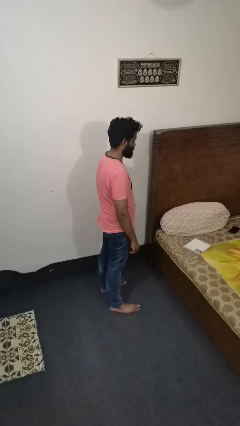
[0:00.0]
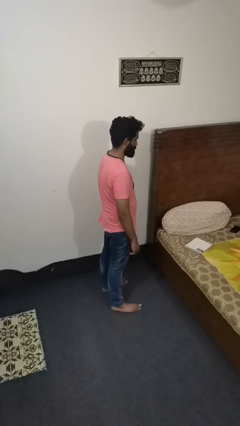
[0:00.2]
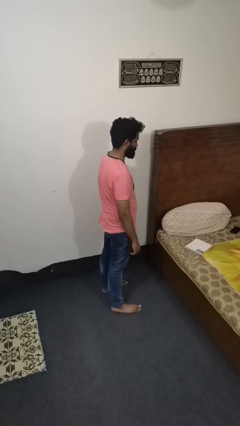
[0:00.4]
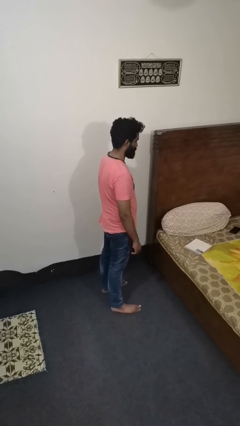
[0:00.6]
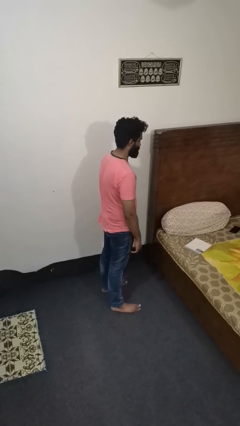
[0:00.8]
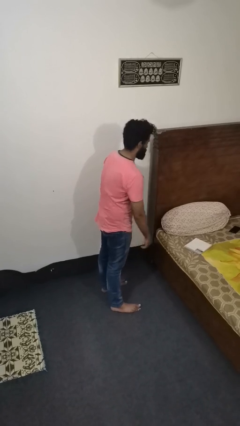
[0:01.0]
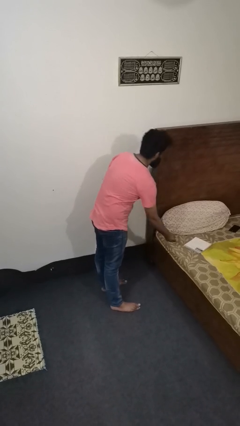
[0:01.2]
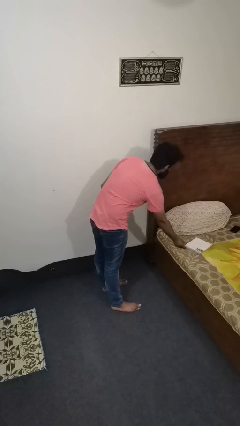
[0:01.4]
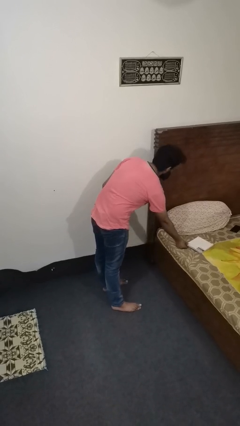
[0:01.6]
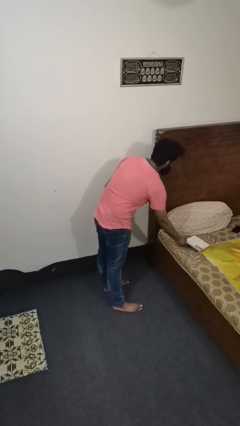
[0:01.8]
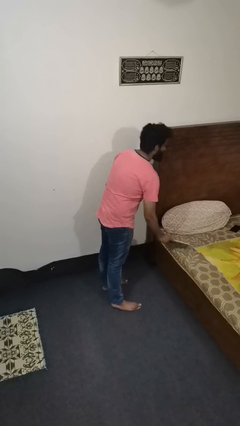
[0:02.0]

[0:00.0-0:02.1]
person picks up object from bed

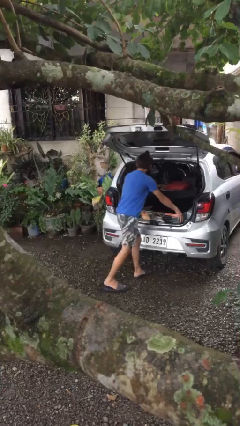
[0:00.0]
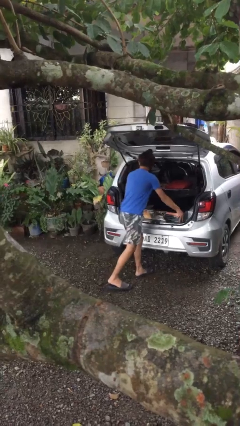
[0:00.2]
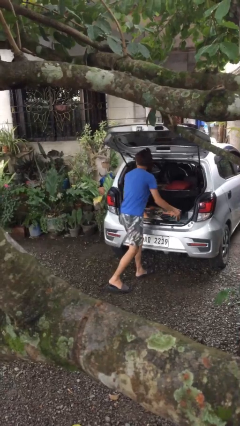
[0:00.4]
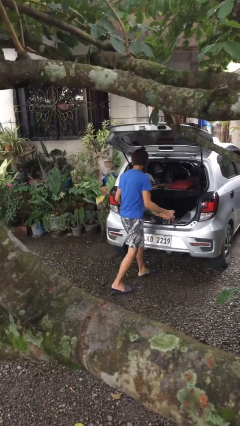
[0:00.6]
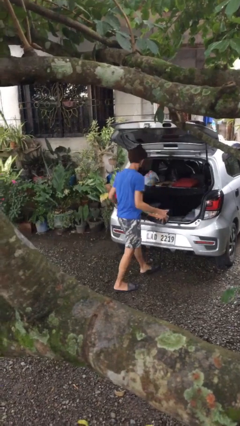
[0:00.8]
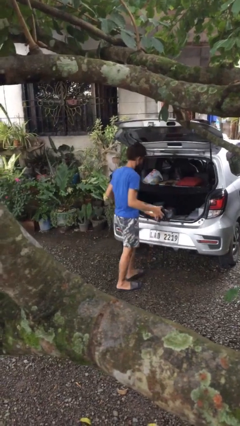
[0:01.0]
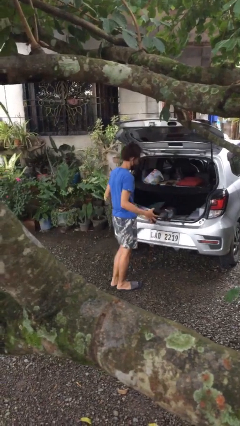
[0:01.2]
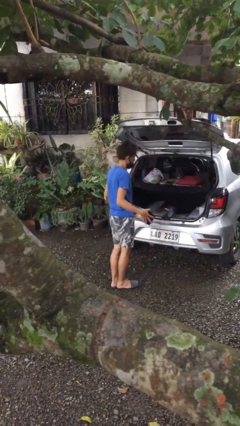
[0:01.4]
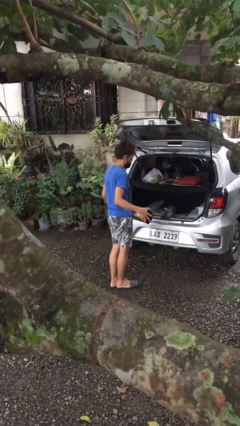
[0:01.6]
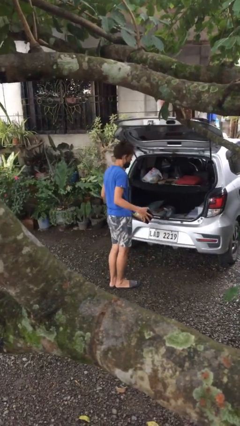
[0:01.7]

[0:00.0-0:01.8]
person unloads car

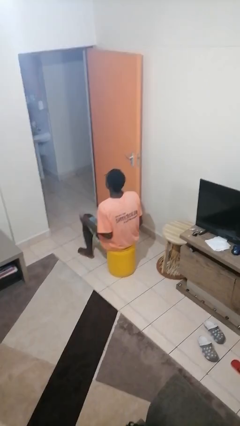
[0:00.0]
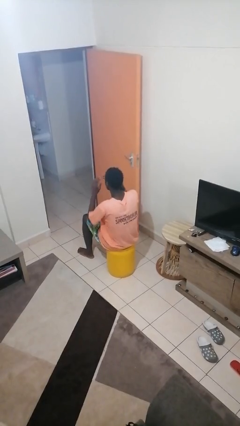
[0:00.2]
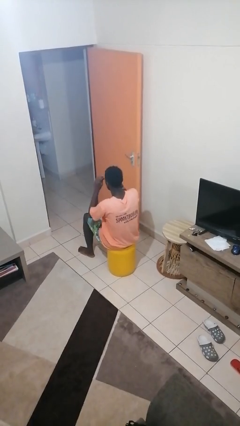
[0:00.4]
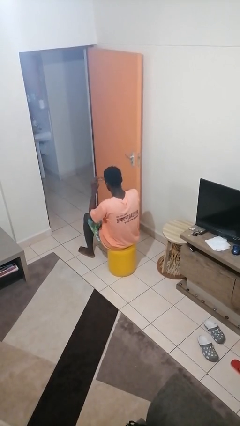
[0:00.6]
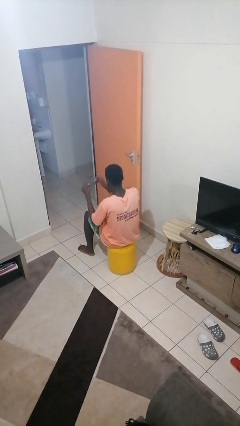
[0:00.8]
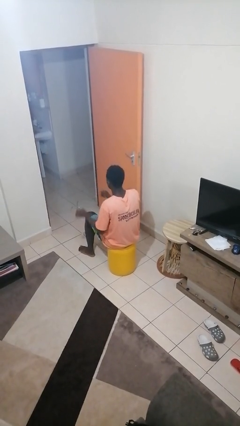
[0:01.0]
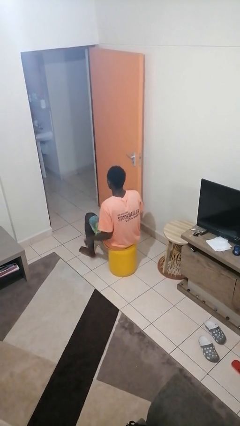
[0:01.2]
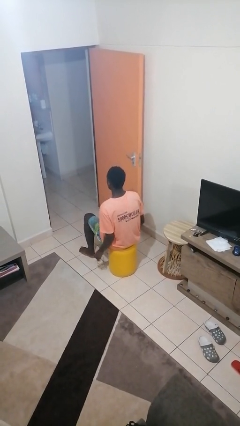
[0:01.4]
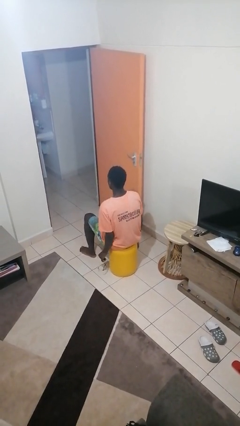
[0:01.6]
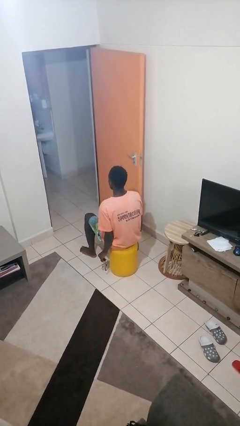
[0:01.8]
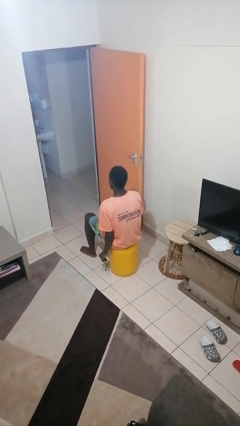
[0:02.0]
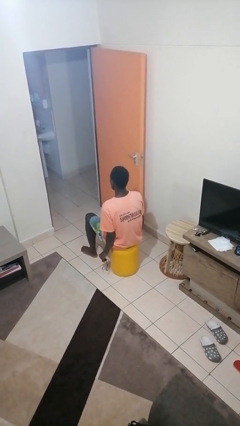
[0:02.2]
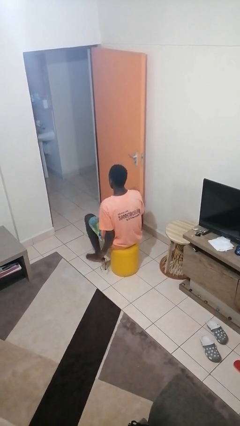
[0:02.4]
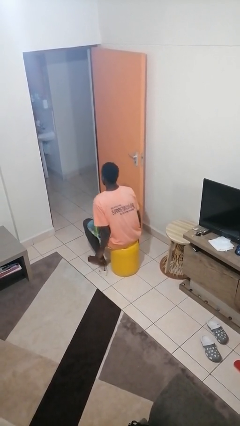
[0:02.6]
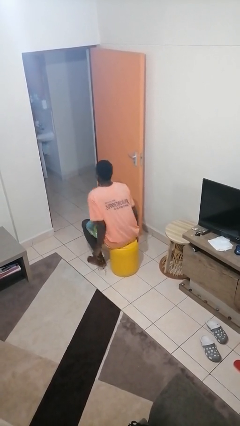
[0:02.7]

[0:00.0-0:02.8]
person takes off glasses

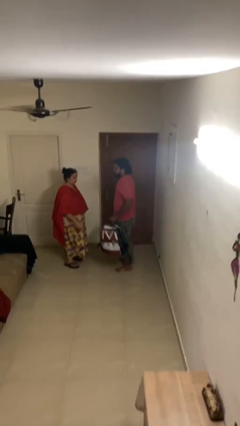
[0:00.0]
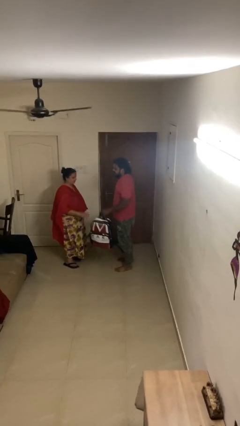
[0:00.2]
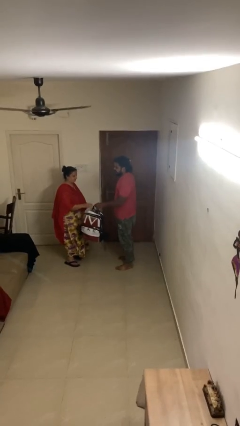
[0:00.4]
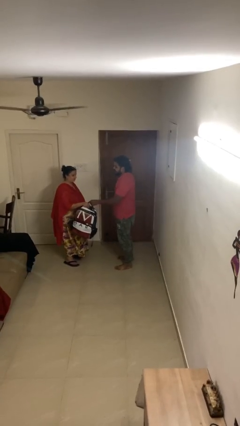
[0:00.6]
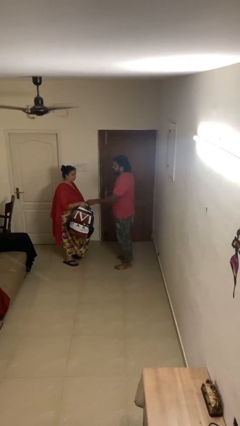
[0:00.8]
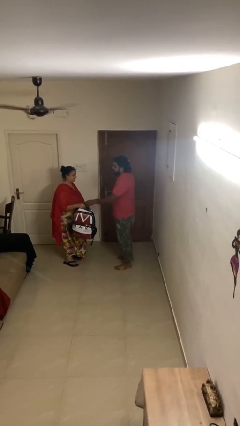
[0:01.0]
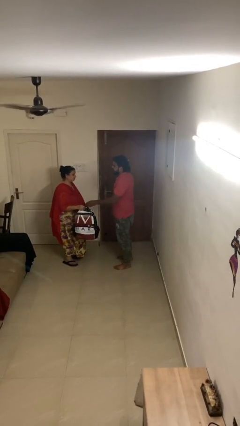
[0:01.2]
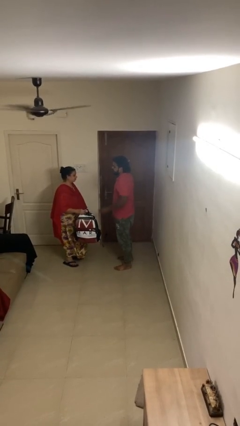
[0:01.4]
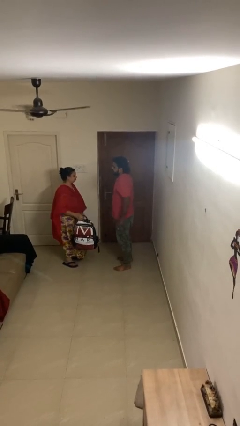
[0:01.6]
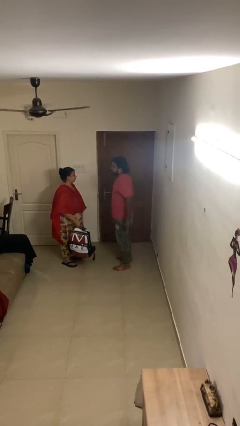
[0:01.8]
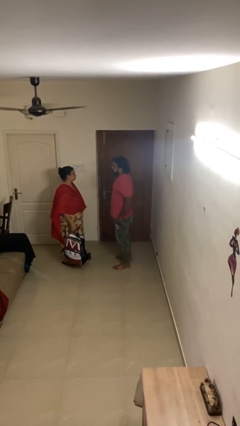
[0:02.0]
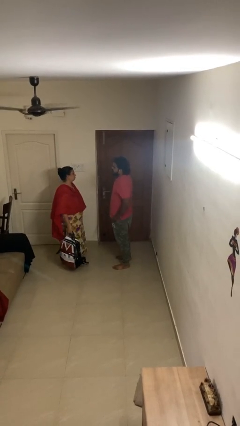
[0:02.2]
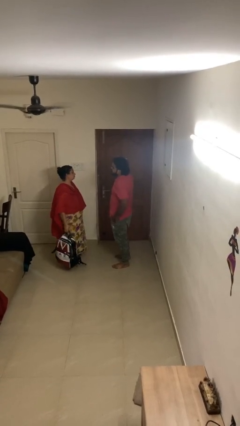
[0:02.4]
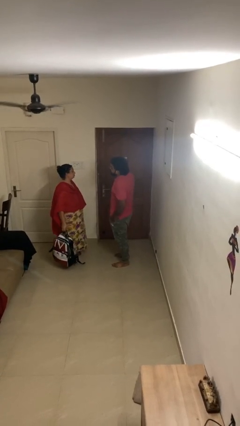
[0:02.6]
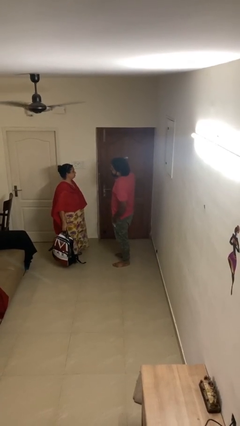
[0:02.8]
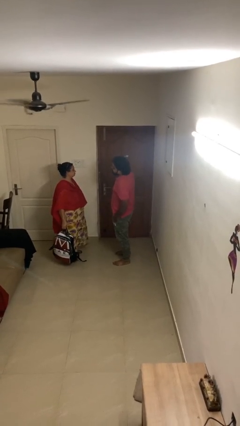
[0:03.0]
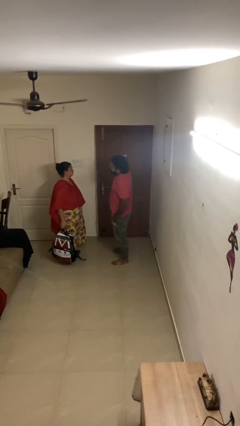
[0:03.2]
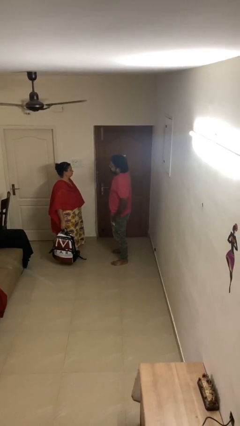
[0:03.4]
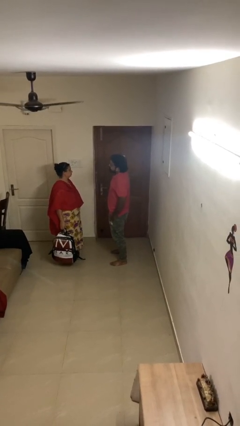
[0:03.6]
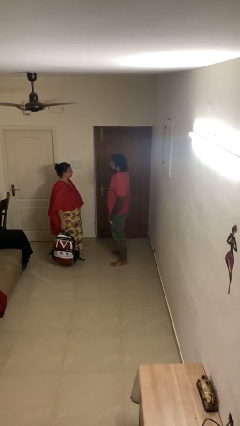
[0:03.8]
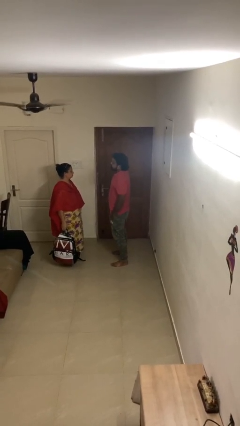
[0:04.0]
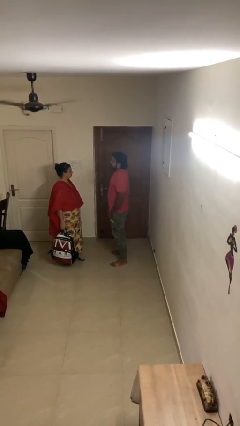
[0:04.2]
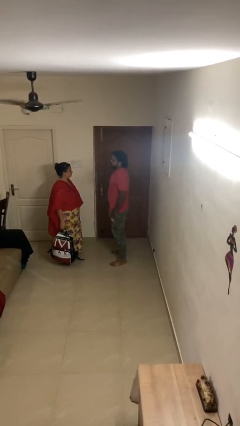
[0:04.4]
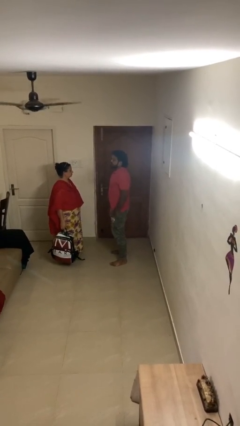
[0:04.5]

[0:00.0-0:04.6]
person transfers object to person

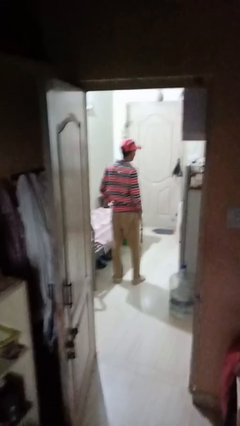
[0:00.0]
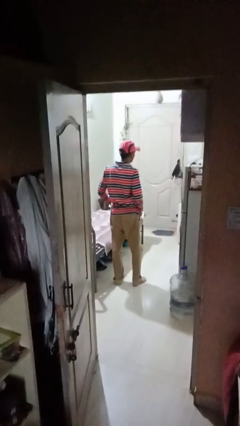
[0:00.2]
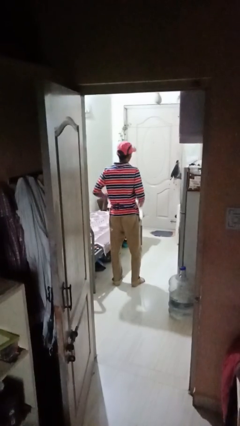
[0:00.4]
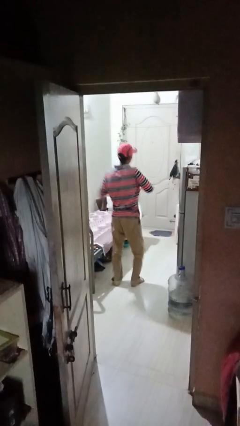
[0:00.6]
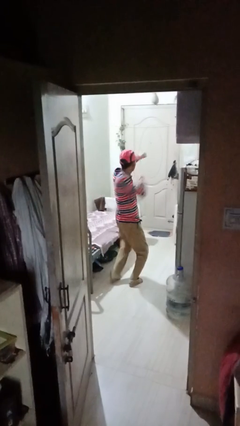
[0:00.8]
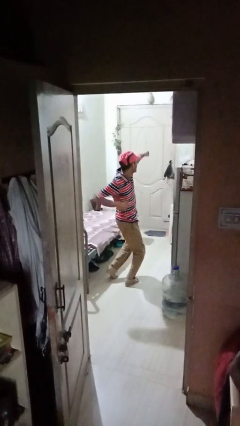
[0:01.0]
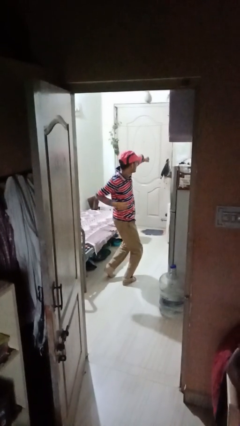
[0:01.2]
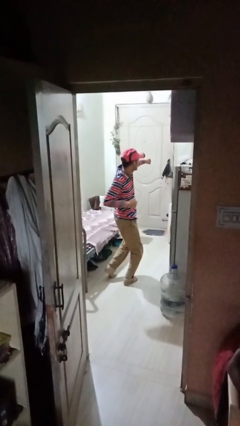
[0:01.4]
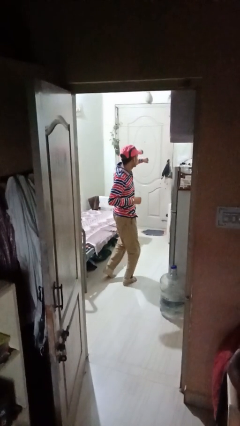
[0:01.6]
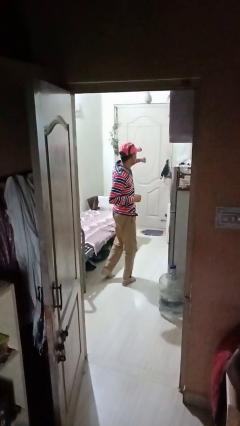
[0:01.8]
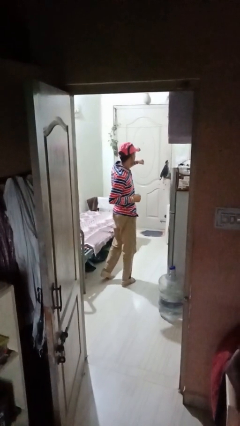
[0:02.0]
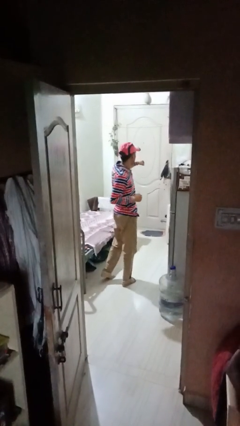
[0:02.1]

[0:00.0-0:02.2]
person punches

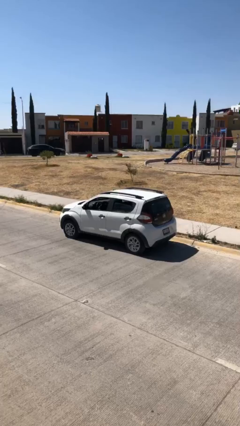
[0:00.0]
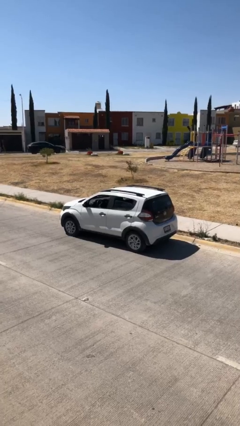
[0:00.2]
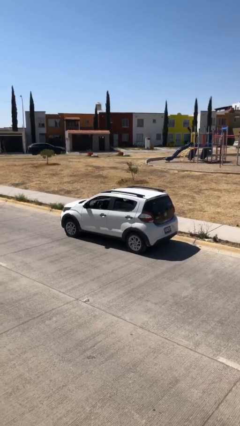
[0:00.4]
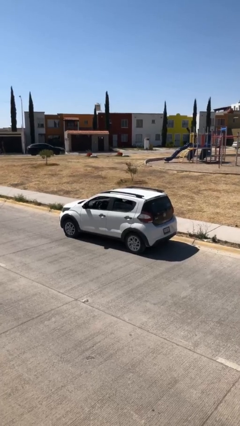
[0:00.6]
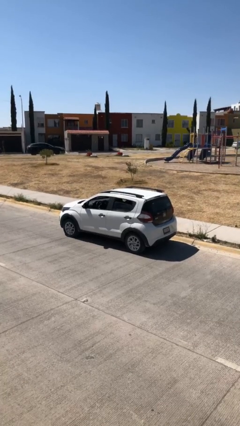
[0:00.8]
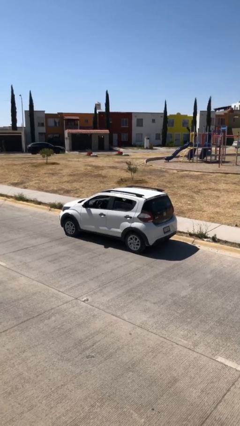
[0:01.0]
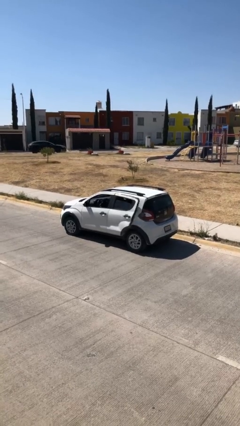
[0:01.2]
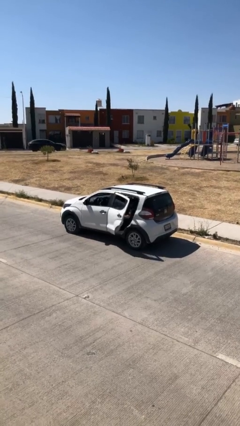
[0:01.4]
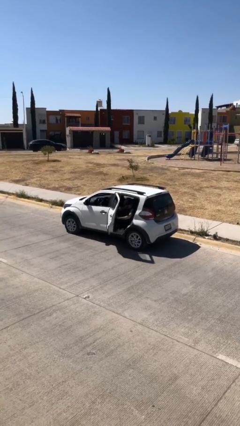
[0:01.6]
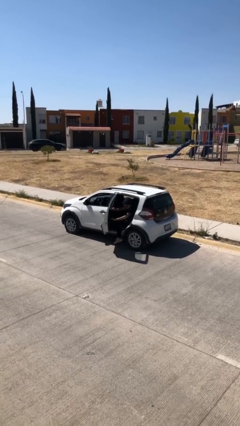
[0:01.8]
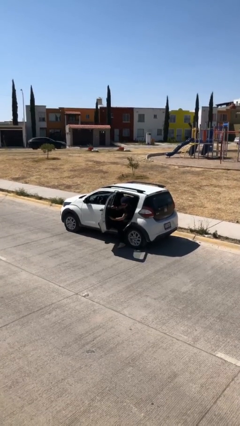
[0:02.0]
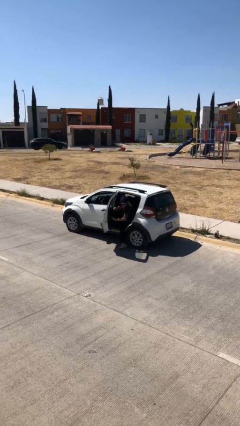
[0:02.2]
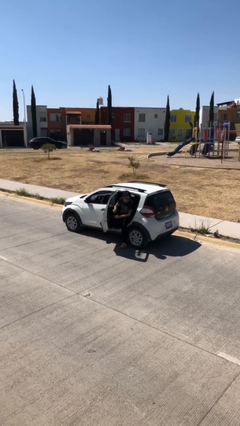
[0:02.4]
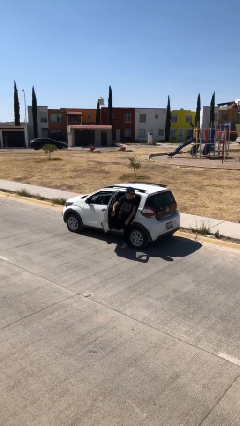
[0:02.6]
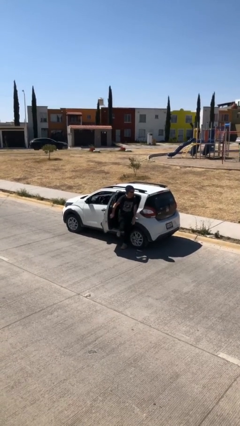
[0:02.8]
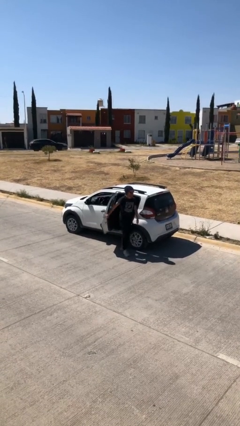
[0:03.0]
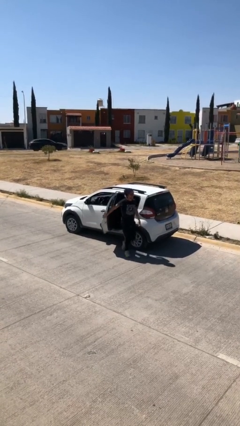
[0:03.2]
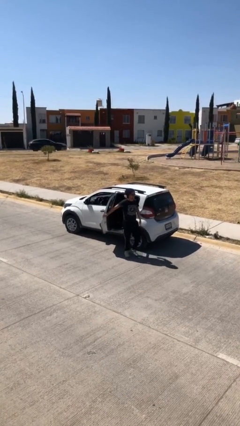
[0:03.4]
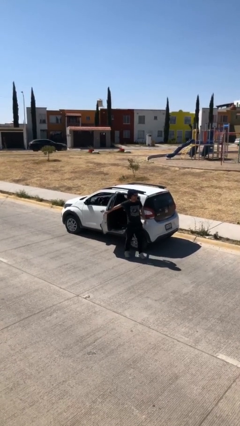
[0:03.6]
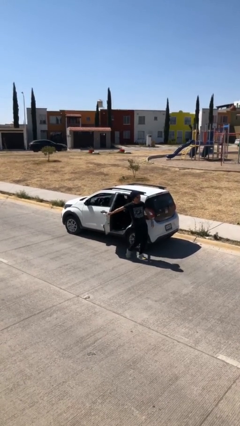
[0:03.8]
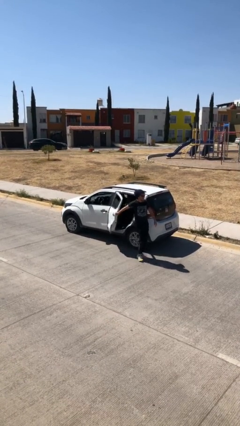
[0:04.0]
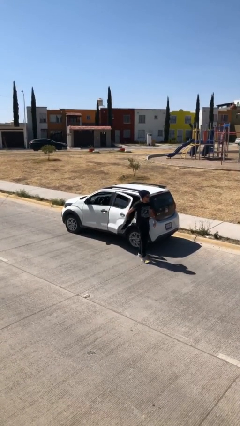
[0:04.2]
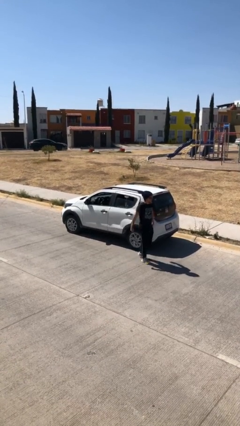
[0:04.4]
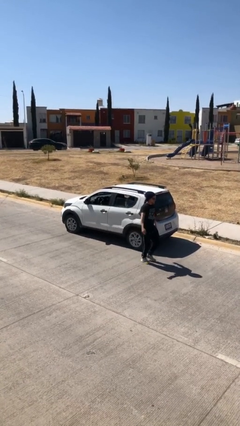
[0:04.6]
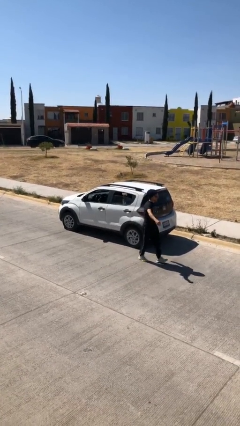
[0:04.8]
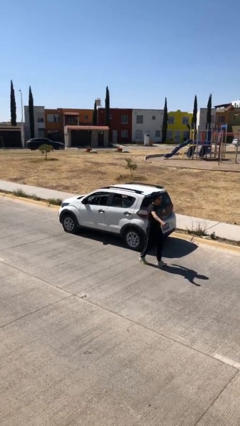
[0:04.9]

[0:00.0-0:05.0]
car drops off person
